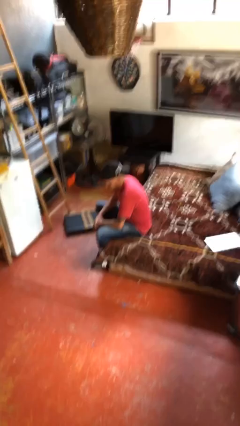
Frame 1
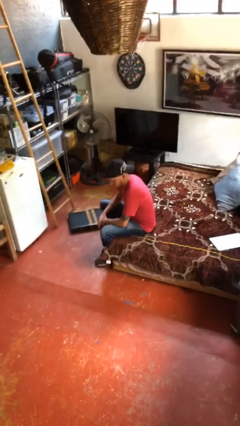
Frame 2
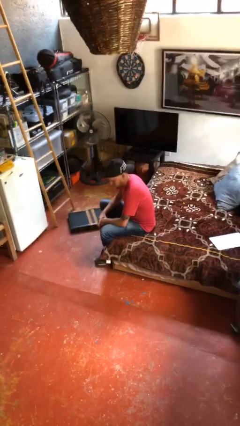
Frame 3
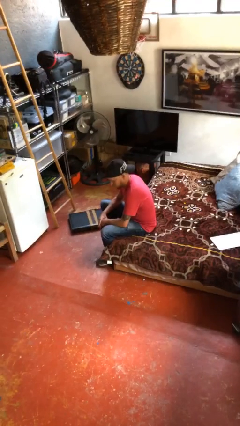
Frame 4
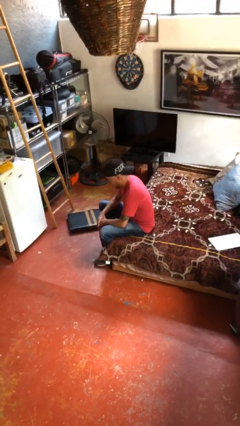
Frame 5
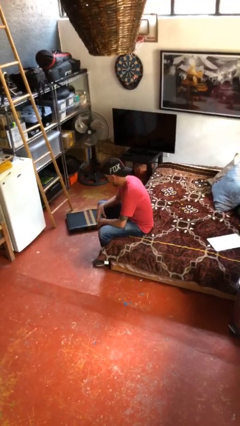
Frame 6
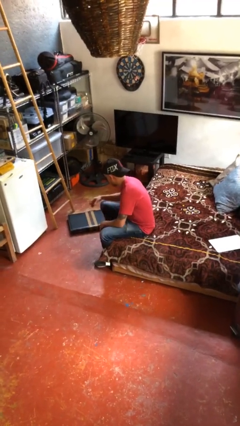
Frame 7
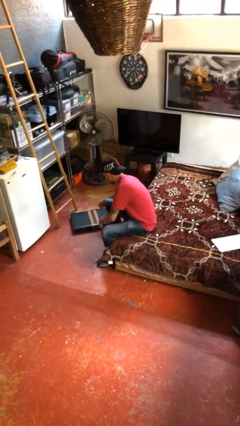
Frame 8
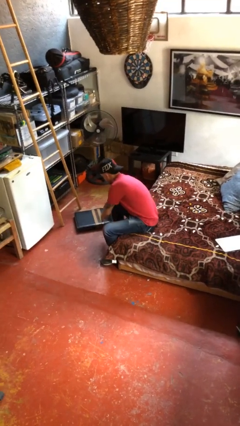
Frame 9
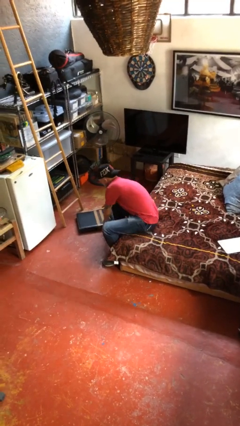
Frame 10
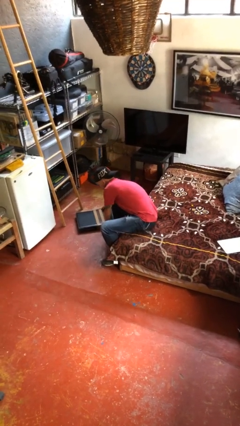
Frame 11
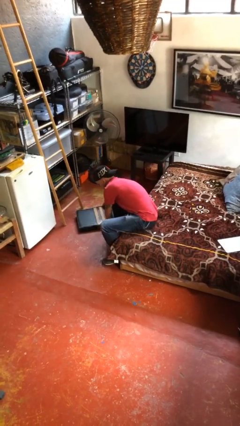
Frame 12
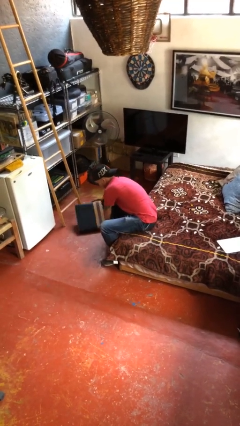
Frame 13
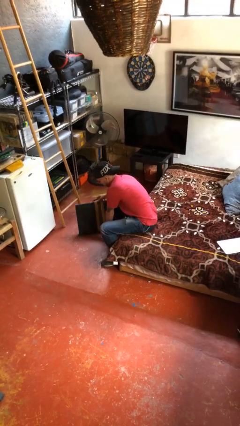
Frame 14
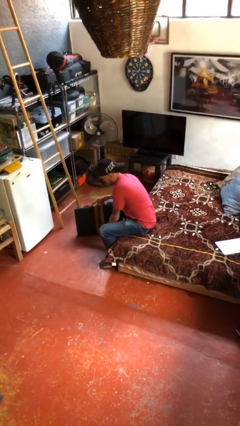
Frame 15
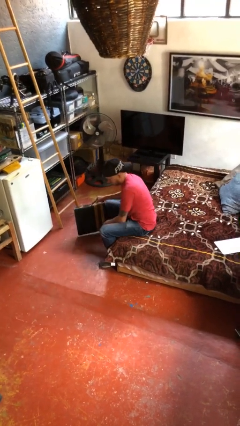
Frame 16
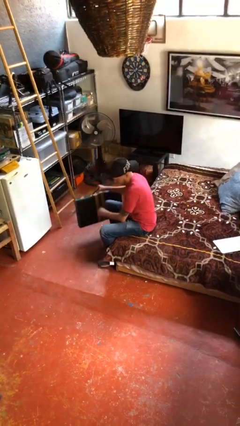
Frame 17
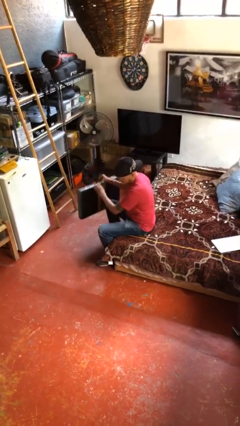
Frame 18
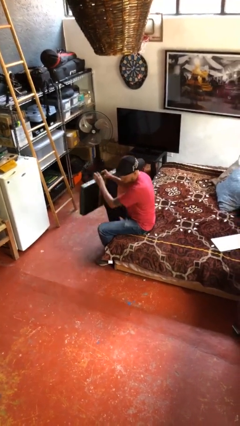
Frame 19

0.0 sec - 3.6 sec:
person picks up object from floor

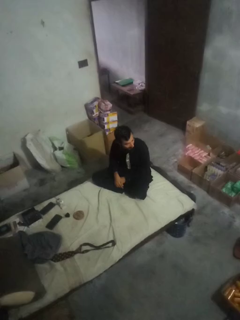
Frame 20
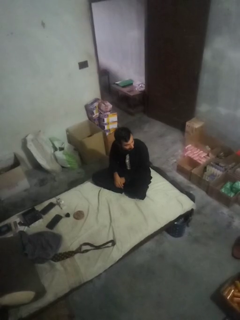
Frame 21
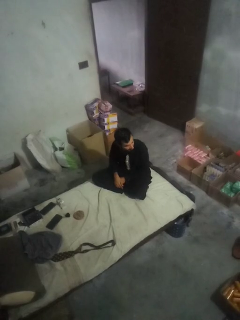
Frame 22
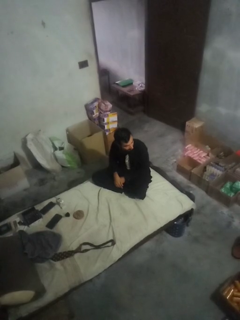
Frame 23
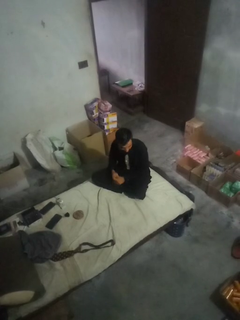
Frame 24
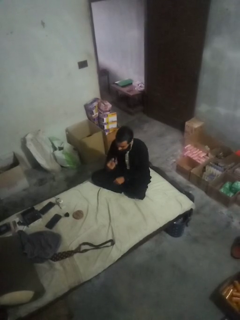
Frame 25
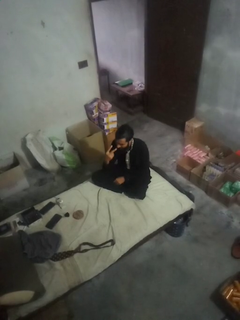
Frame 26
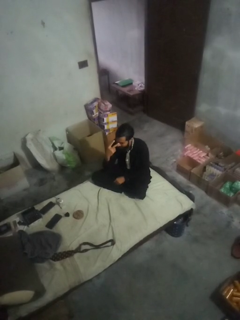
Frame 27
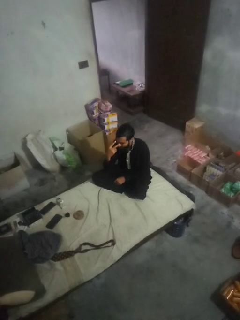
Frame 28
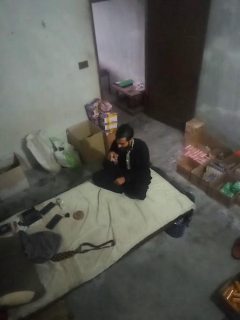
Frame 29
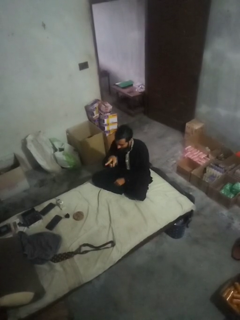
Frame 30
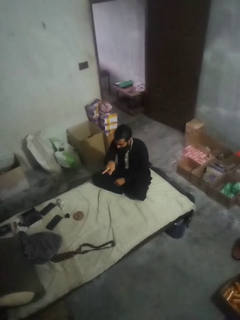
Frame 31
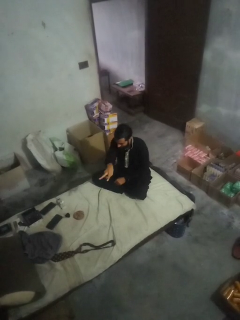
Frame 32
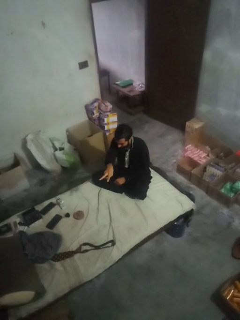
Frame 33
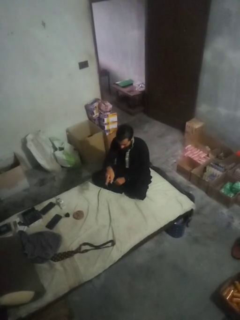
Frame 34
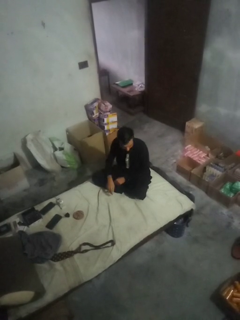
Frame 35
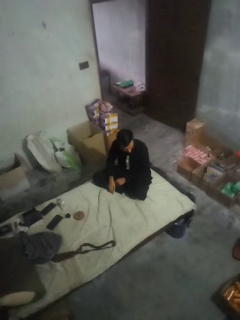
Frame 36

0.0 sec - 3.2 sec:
person gestures watch closely

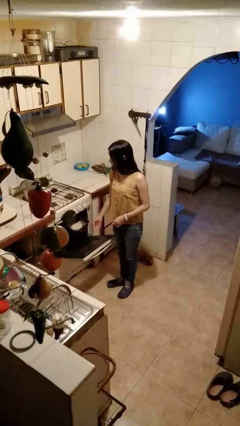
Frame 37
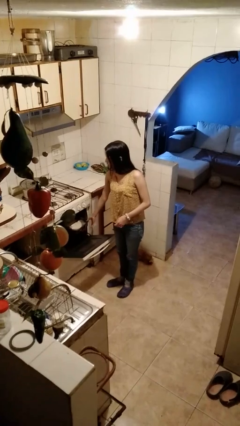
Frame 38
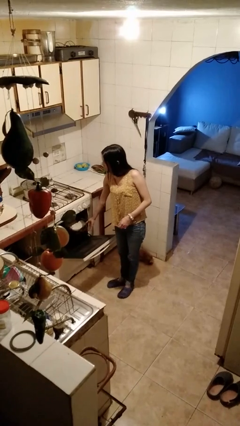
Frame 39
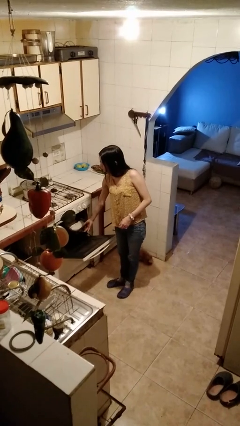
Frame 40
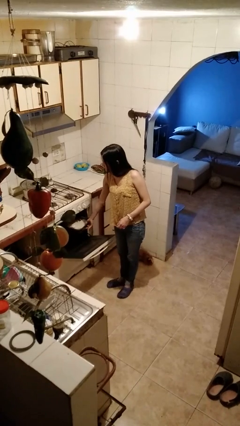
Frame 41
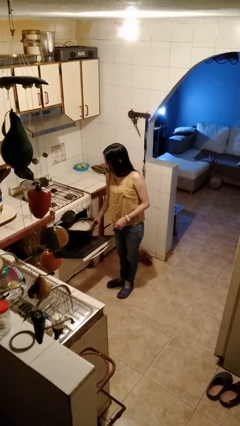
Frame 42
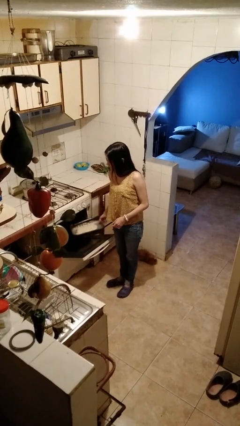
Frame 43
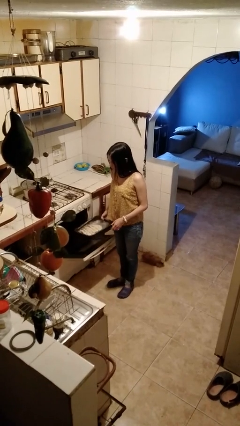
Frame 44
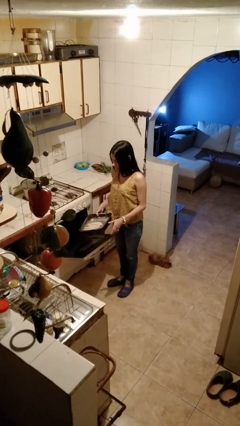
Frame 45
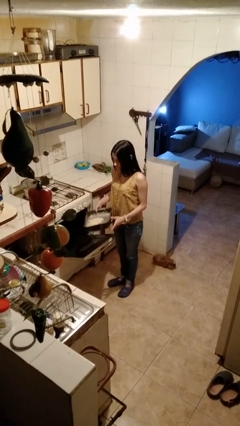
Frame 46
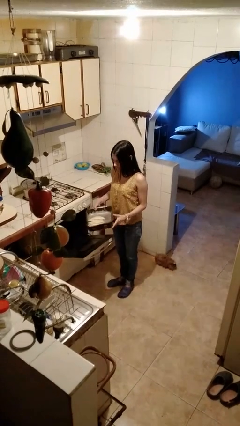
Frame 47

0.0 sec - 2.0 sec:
person takes object from oven

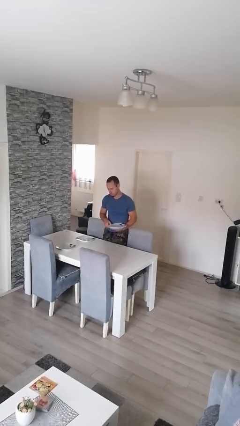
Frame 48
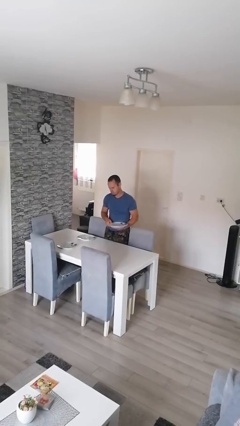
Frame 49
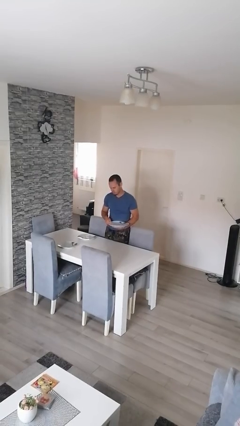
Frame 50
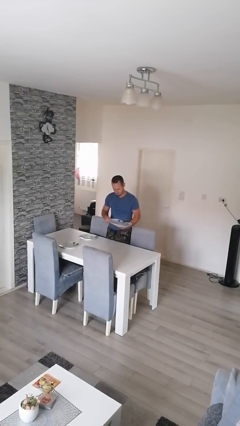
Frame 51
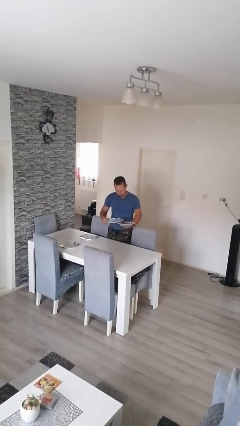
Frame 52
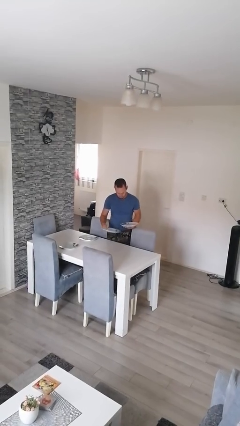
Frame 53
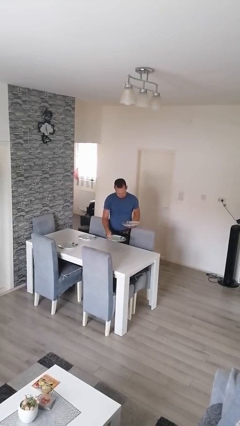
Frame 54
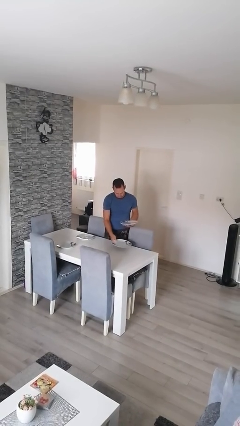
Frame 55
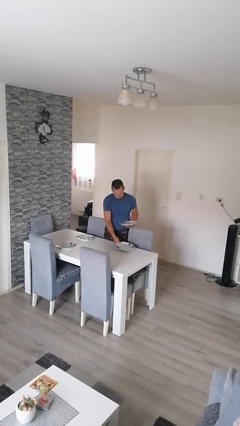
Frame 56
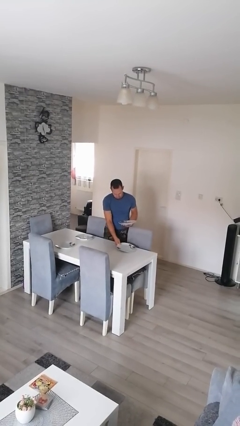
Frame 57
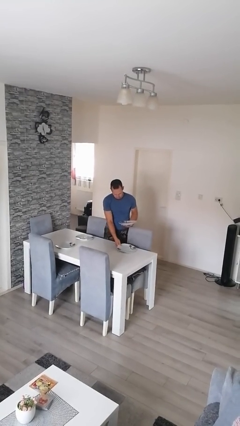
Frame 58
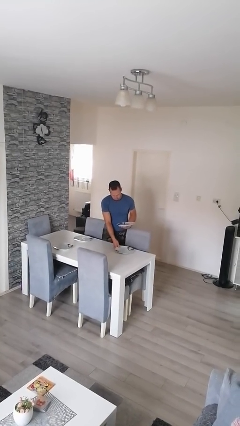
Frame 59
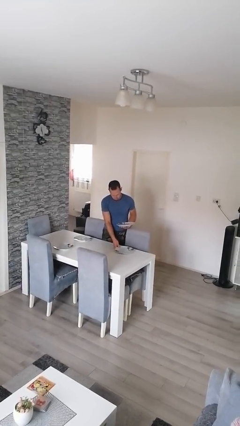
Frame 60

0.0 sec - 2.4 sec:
person sets table

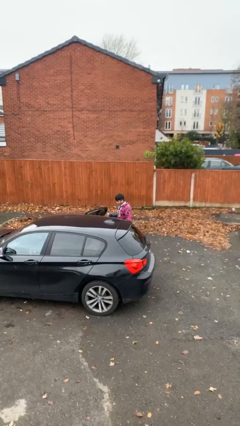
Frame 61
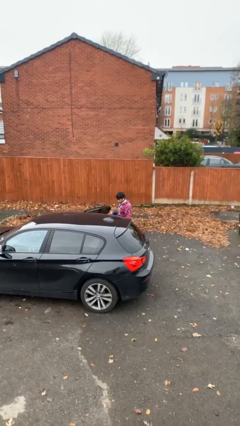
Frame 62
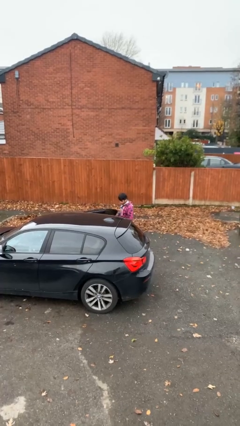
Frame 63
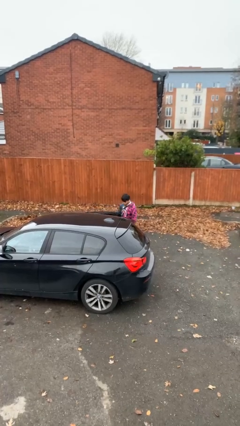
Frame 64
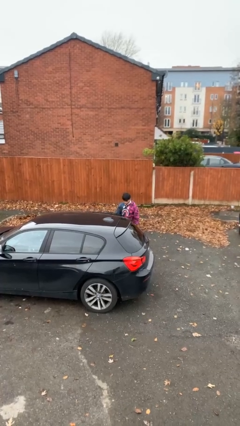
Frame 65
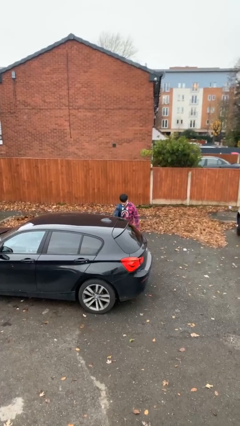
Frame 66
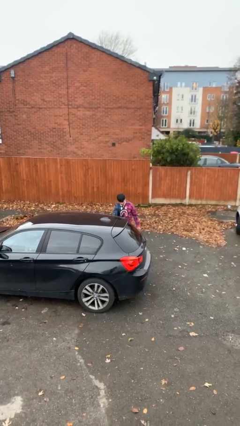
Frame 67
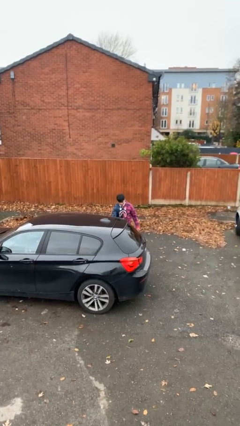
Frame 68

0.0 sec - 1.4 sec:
person closes car door

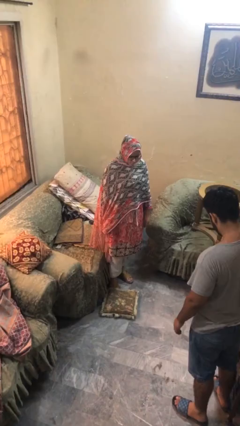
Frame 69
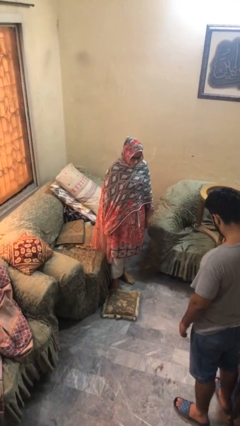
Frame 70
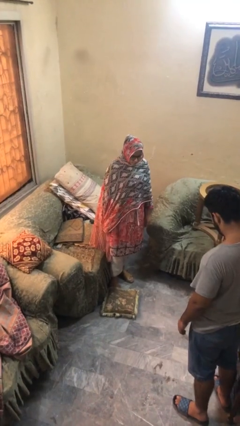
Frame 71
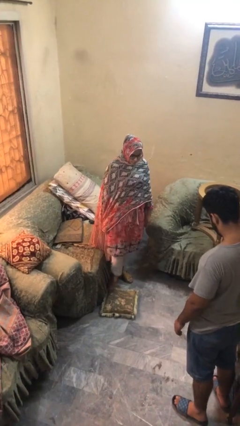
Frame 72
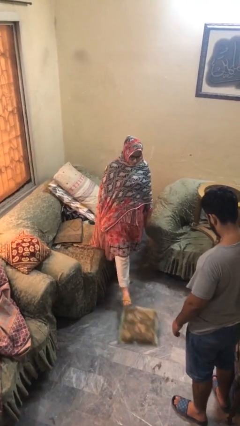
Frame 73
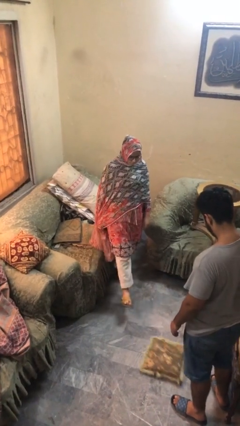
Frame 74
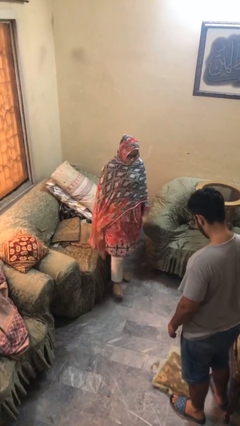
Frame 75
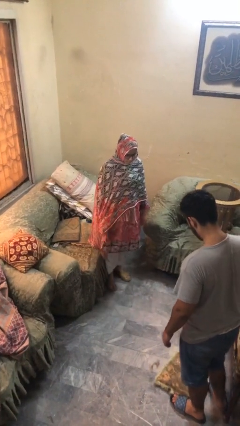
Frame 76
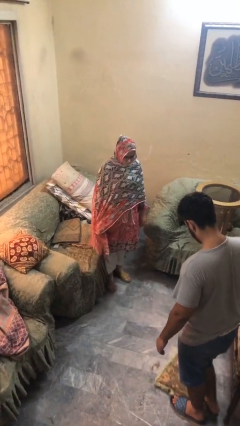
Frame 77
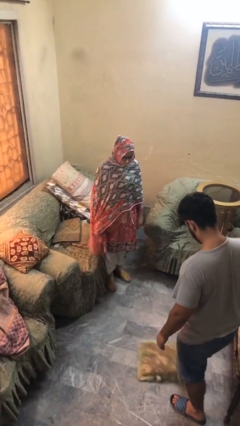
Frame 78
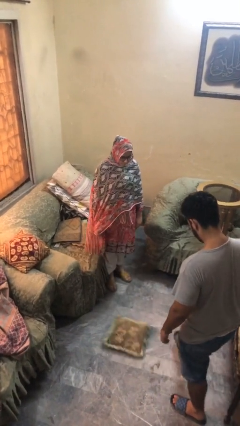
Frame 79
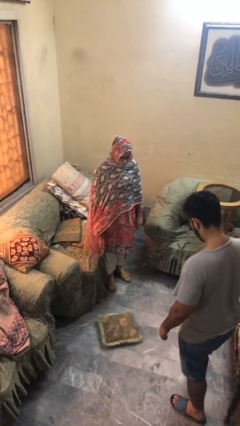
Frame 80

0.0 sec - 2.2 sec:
person kicks object to person

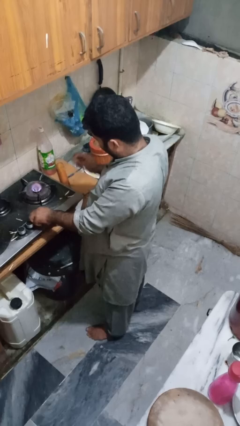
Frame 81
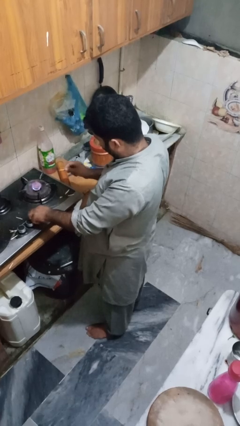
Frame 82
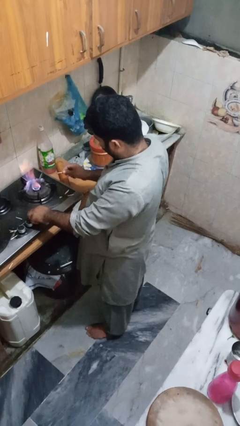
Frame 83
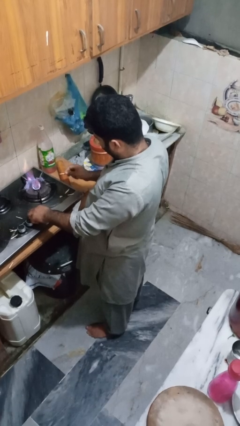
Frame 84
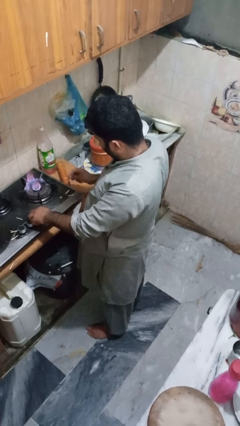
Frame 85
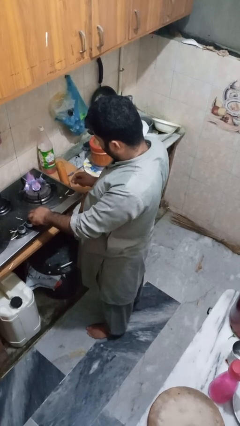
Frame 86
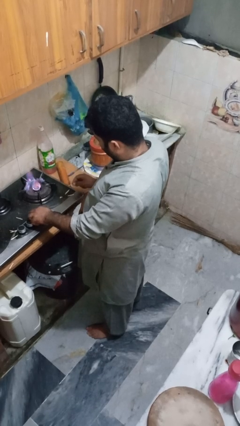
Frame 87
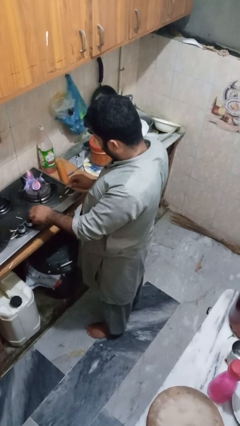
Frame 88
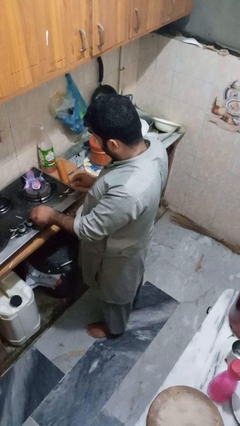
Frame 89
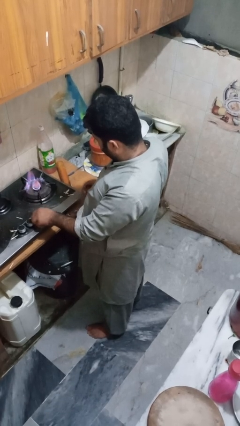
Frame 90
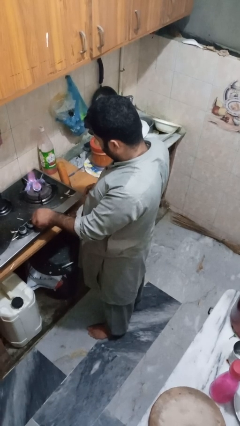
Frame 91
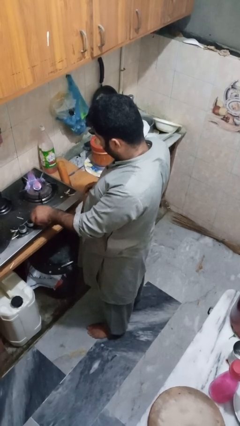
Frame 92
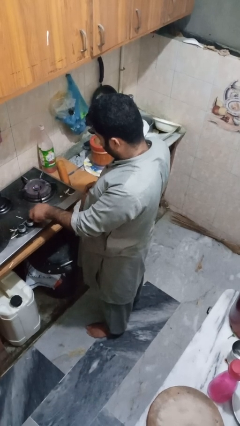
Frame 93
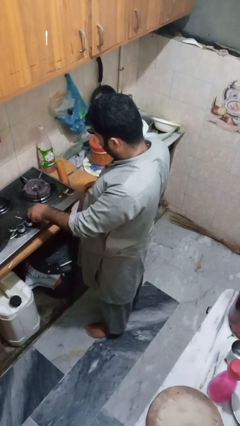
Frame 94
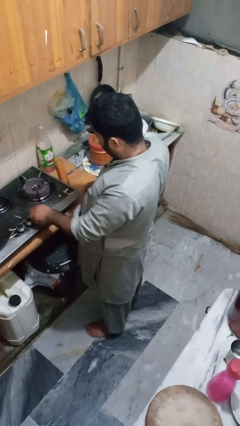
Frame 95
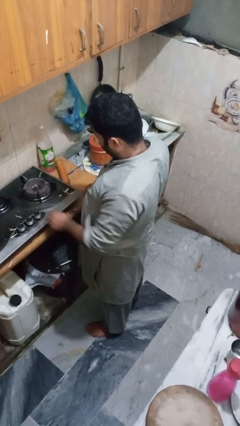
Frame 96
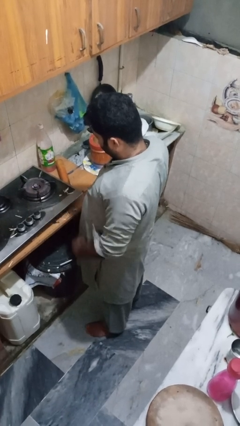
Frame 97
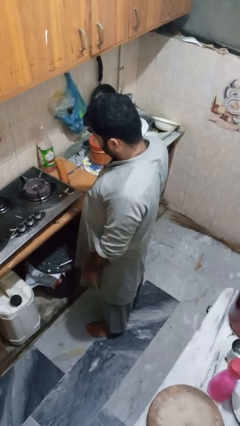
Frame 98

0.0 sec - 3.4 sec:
person turns off stovetop
